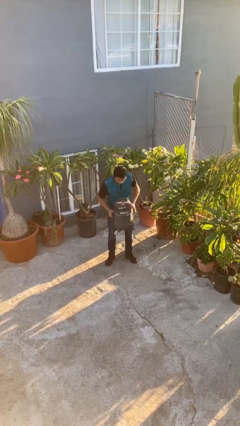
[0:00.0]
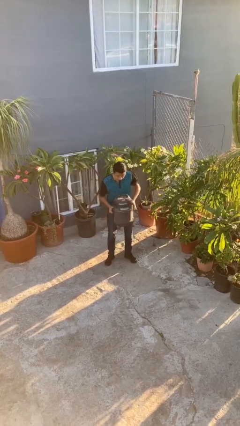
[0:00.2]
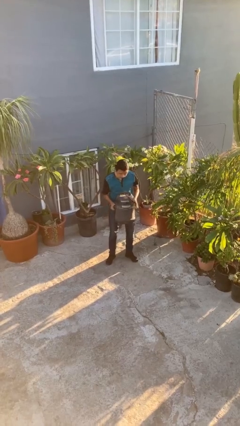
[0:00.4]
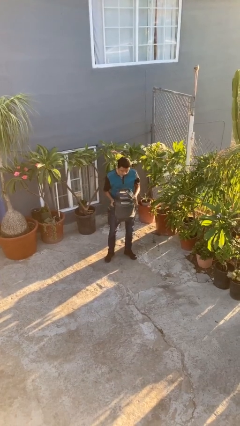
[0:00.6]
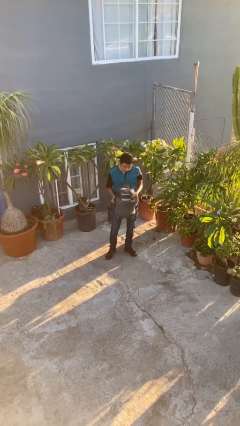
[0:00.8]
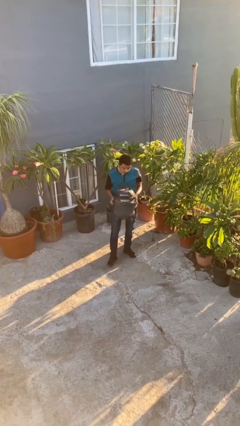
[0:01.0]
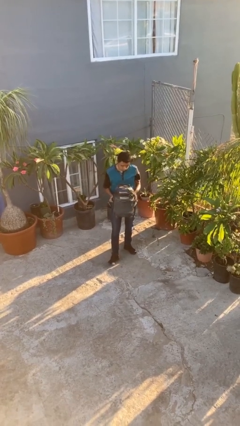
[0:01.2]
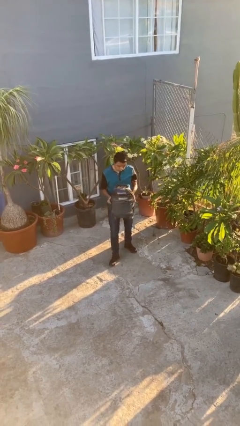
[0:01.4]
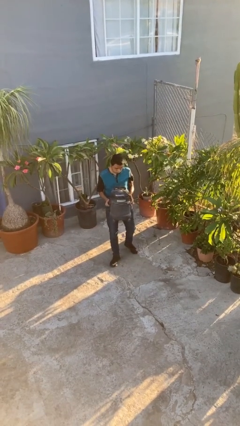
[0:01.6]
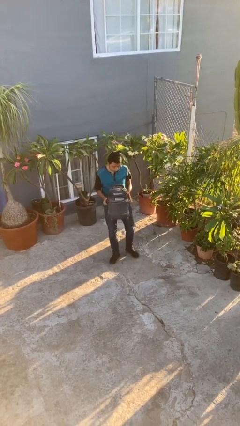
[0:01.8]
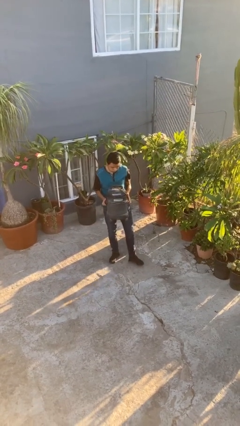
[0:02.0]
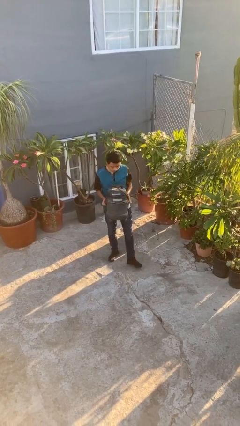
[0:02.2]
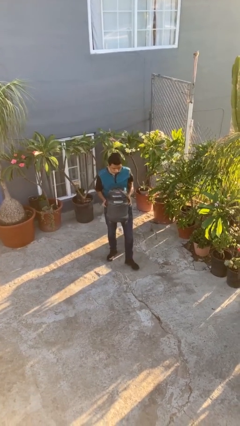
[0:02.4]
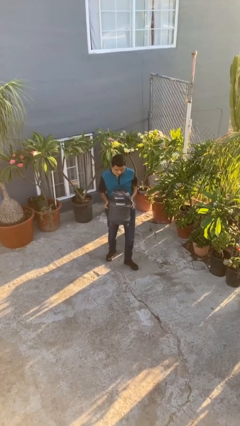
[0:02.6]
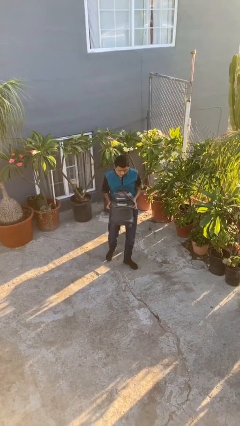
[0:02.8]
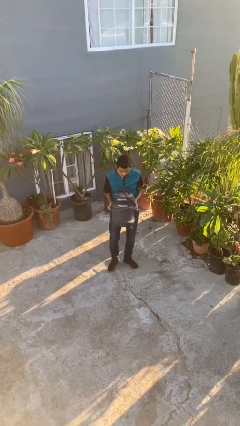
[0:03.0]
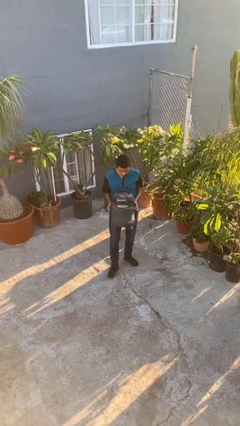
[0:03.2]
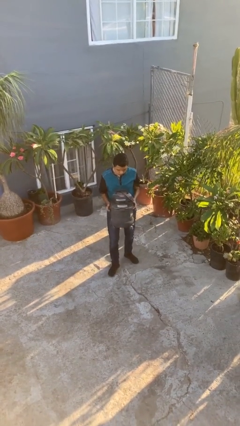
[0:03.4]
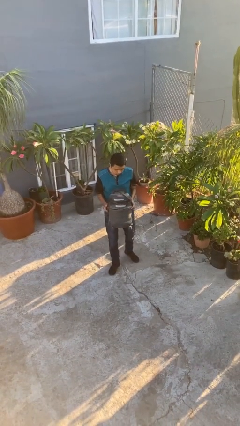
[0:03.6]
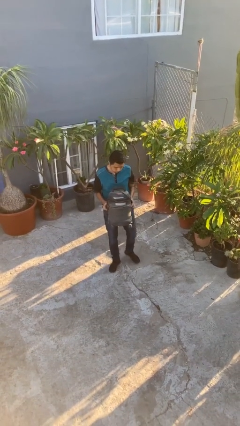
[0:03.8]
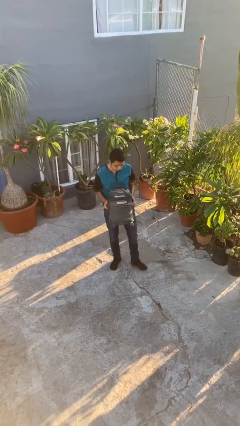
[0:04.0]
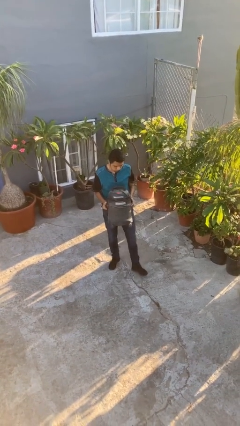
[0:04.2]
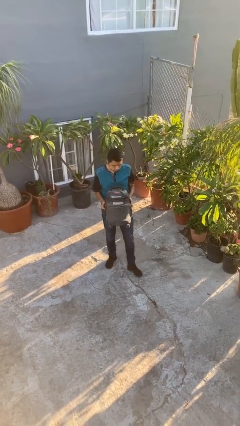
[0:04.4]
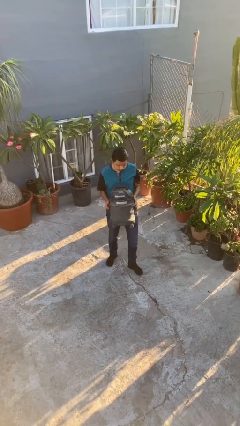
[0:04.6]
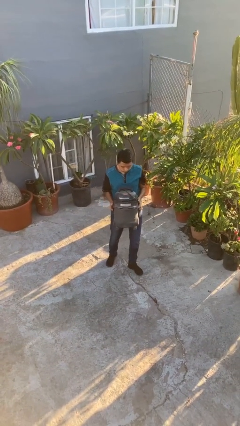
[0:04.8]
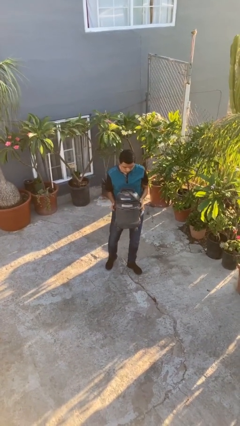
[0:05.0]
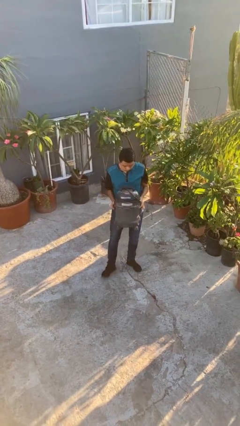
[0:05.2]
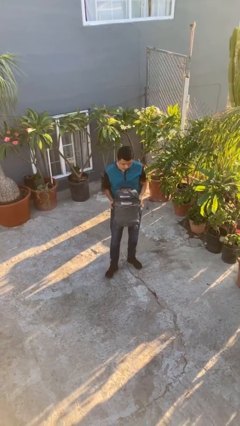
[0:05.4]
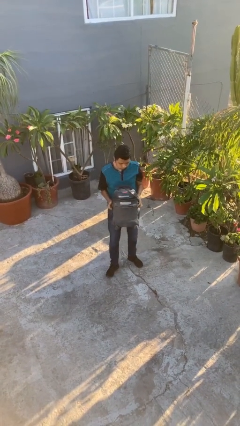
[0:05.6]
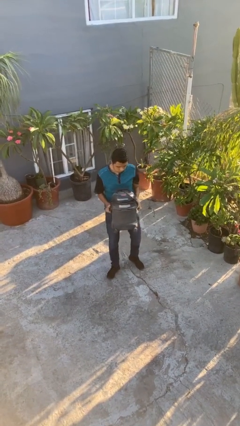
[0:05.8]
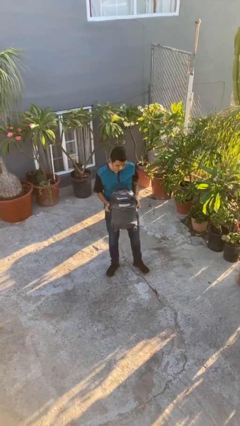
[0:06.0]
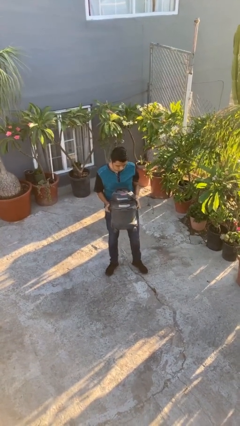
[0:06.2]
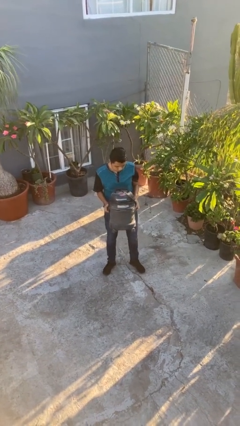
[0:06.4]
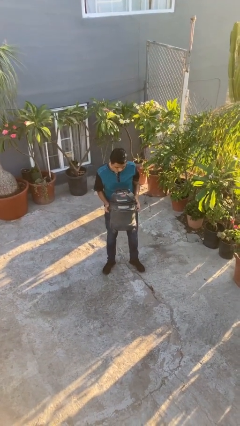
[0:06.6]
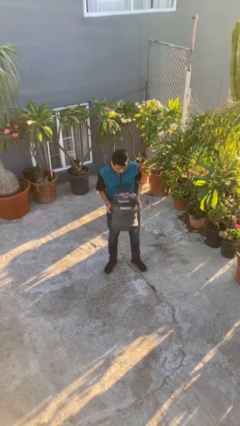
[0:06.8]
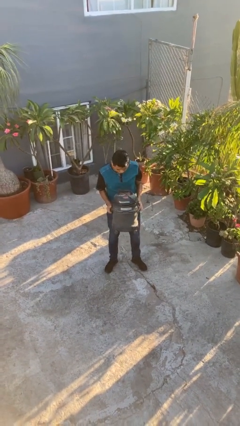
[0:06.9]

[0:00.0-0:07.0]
person carries heavy object

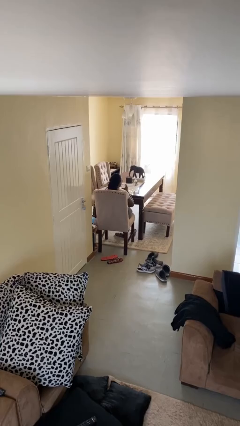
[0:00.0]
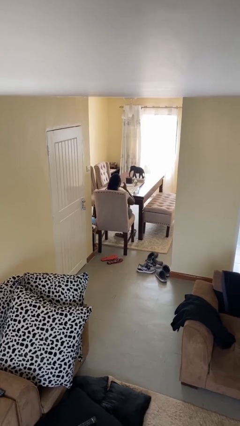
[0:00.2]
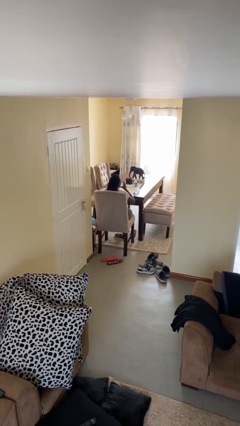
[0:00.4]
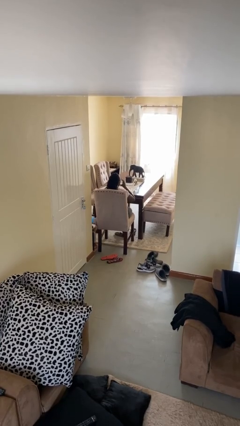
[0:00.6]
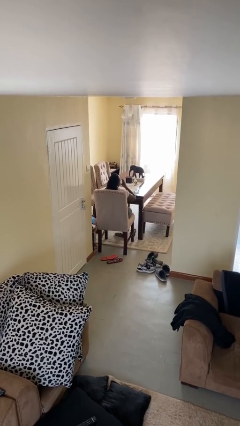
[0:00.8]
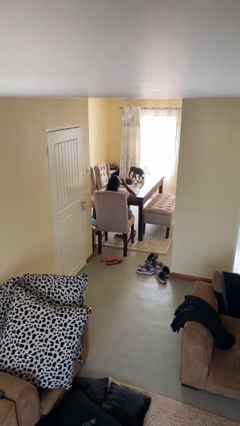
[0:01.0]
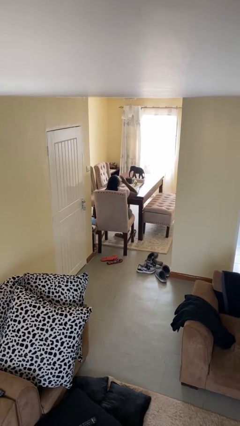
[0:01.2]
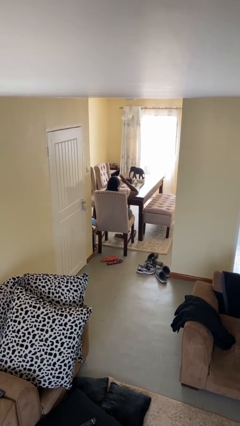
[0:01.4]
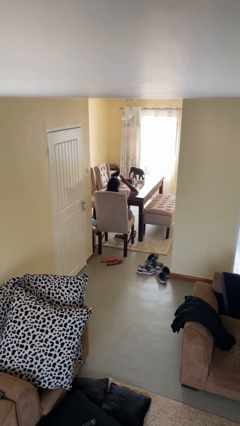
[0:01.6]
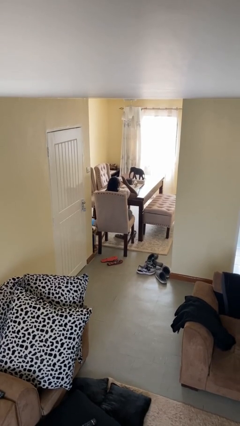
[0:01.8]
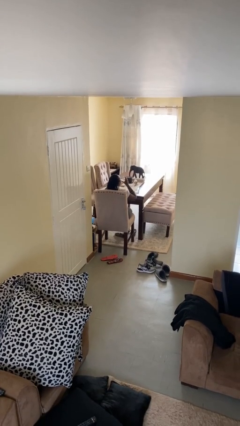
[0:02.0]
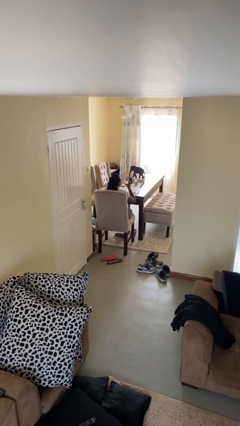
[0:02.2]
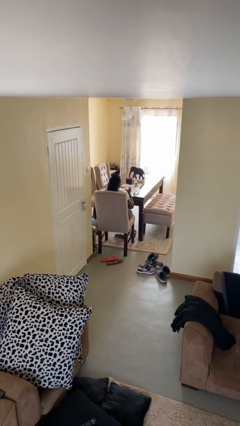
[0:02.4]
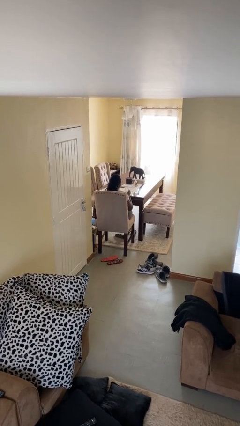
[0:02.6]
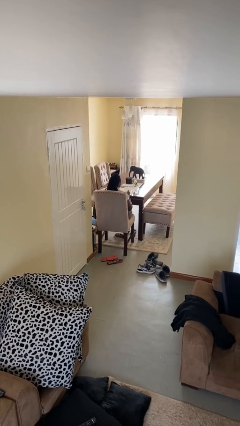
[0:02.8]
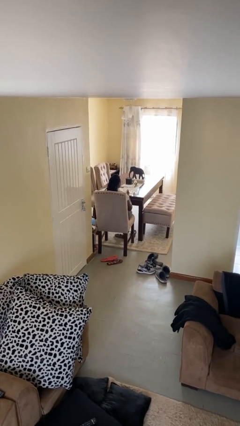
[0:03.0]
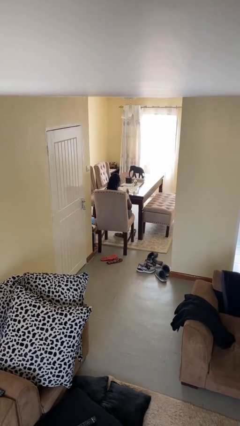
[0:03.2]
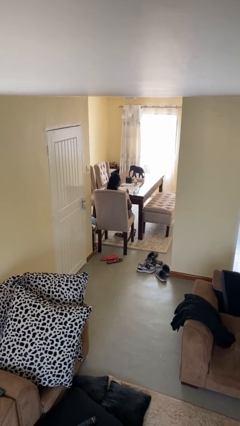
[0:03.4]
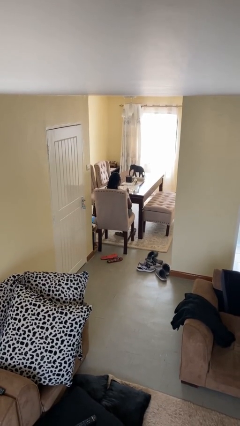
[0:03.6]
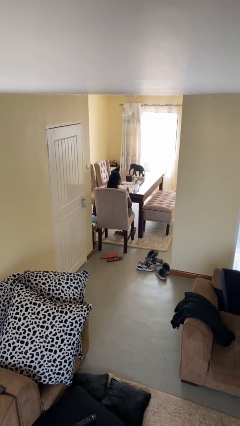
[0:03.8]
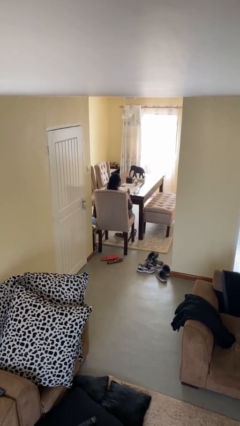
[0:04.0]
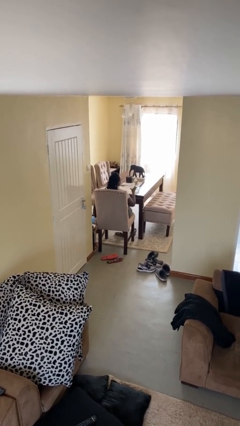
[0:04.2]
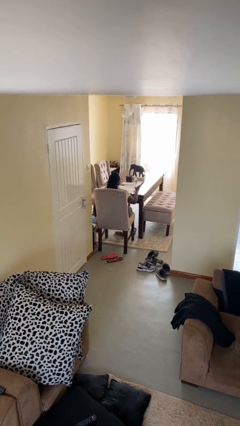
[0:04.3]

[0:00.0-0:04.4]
person drinks from shotglass

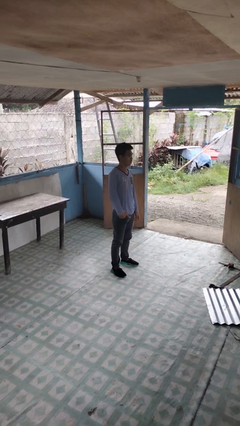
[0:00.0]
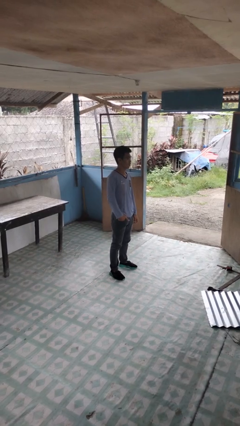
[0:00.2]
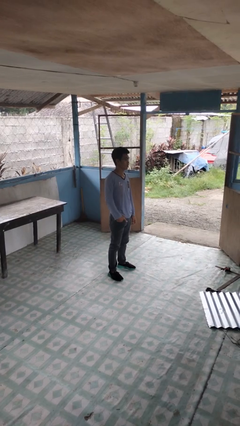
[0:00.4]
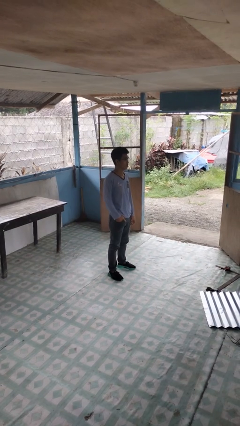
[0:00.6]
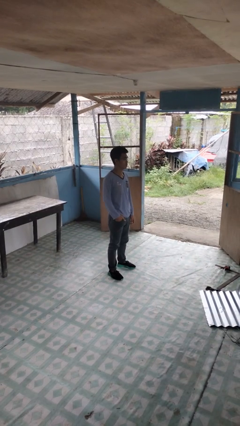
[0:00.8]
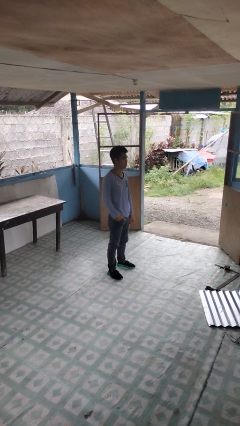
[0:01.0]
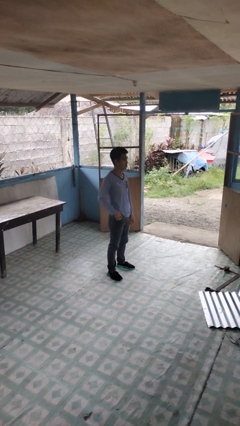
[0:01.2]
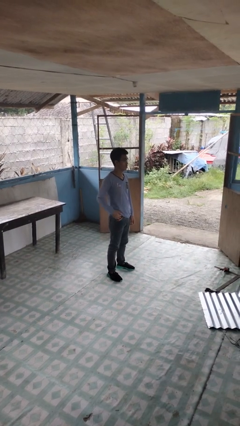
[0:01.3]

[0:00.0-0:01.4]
person puts hands in back pockets

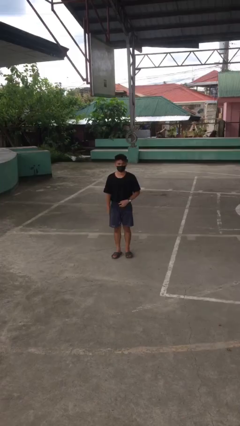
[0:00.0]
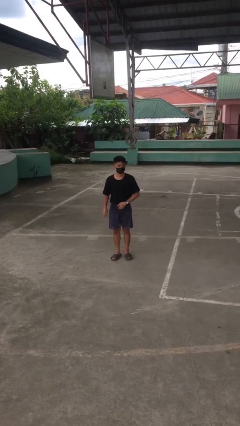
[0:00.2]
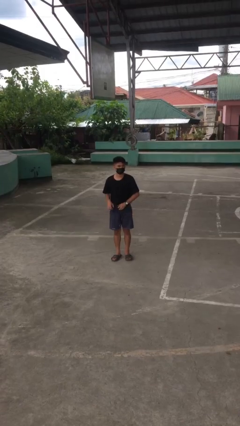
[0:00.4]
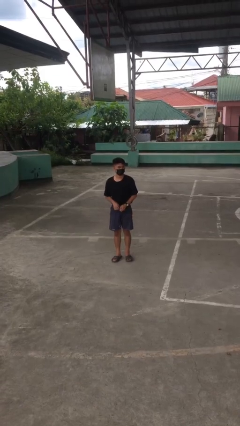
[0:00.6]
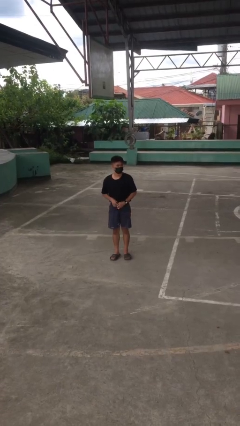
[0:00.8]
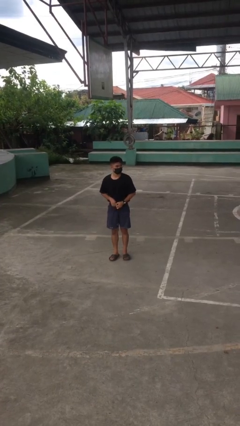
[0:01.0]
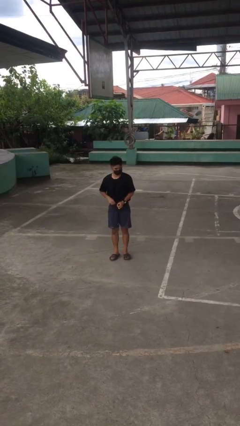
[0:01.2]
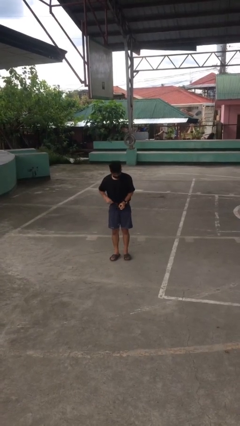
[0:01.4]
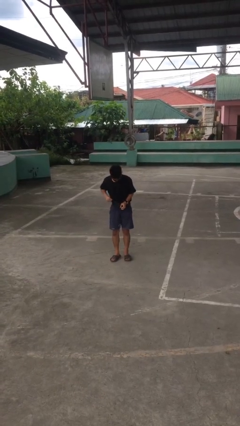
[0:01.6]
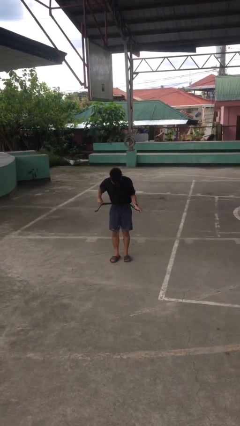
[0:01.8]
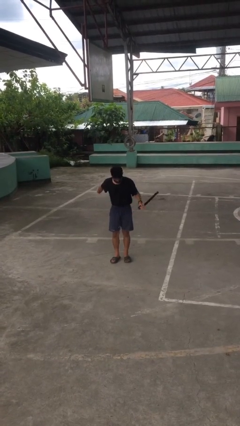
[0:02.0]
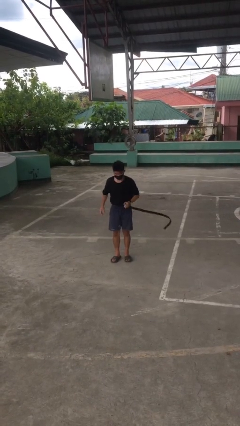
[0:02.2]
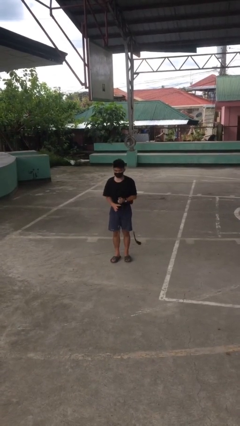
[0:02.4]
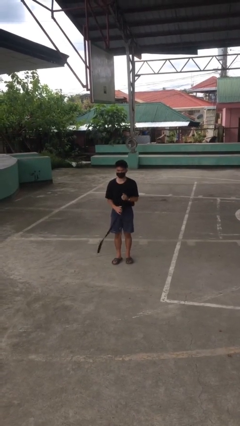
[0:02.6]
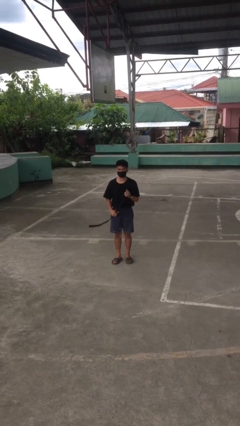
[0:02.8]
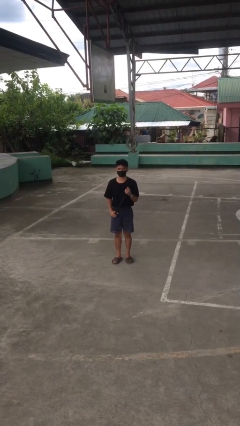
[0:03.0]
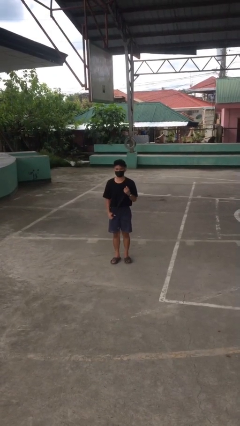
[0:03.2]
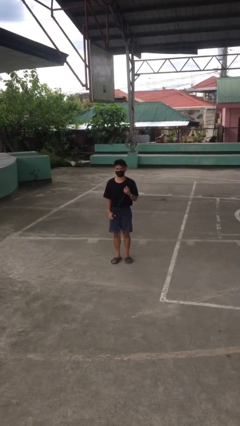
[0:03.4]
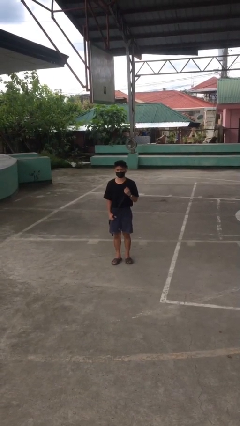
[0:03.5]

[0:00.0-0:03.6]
person takes off belt

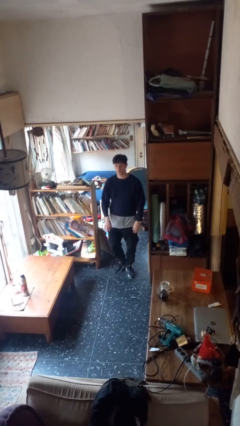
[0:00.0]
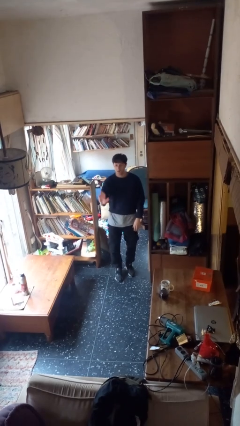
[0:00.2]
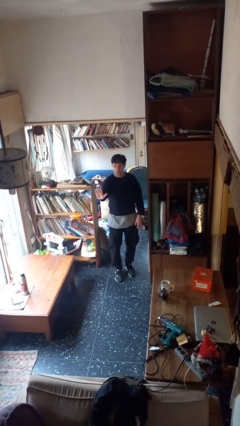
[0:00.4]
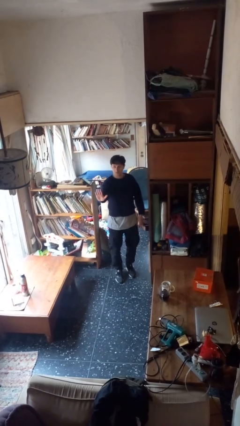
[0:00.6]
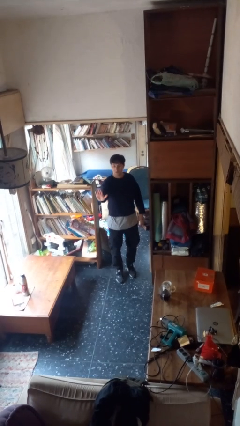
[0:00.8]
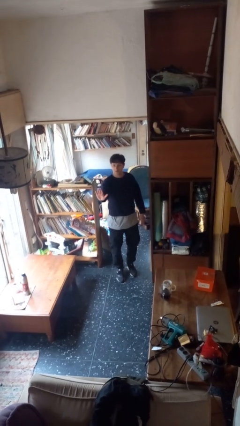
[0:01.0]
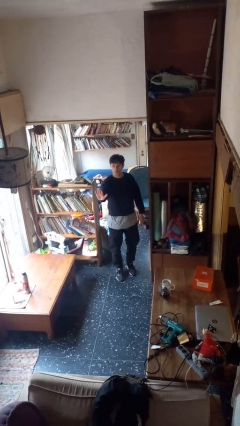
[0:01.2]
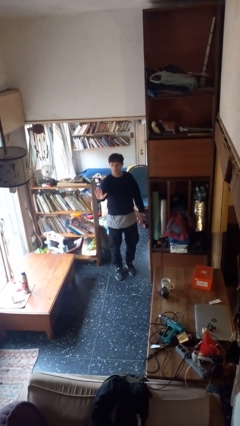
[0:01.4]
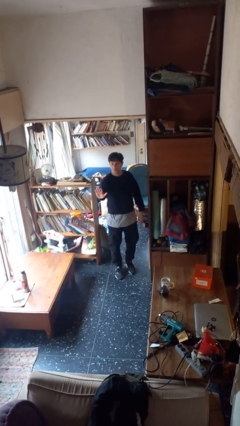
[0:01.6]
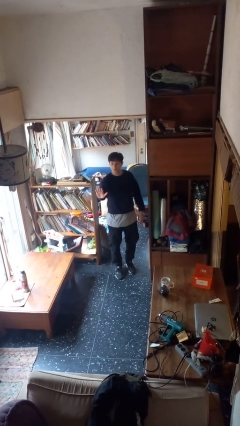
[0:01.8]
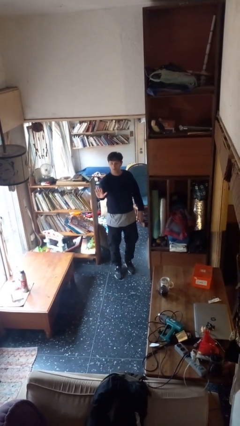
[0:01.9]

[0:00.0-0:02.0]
person gestures stop
